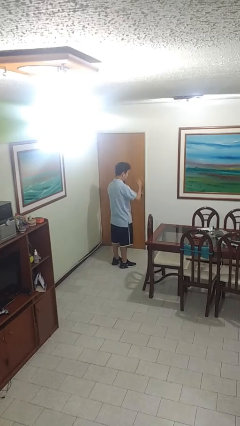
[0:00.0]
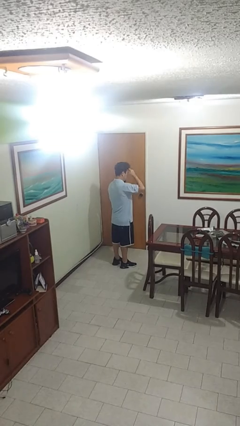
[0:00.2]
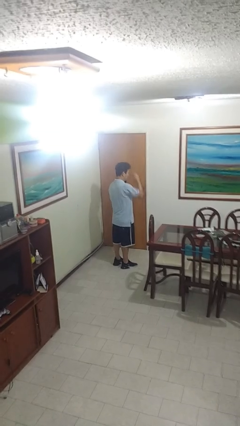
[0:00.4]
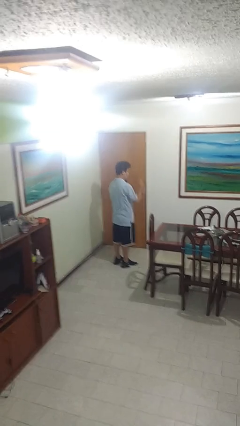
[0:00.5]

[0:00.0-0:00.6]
person salutes

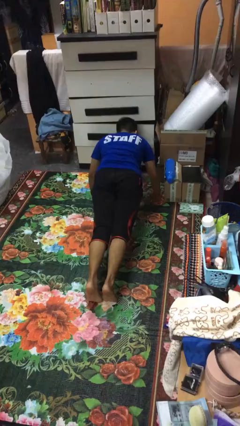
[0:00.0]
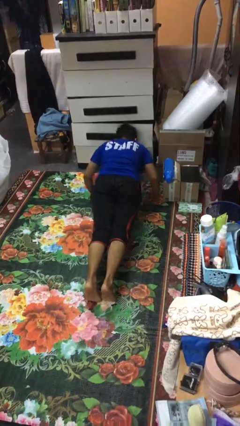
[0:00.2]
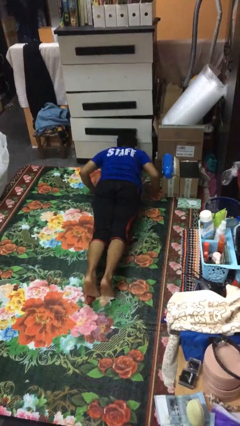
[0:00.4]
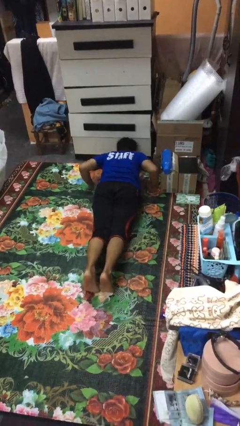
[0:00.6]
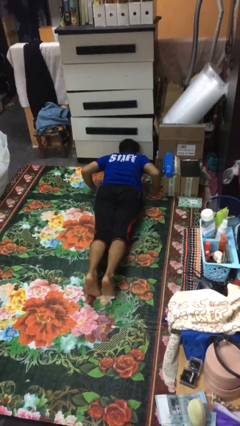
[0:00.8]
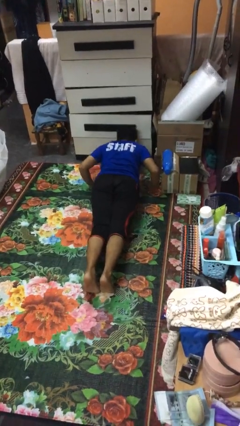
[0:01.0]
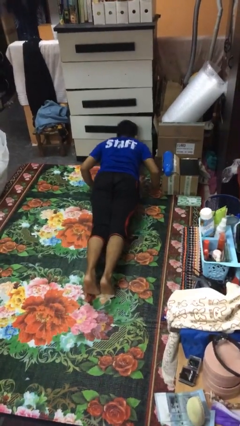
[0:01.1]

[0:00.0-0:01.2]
person exercises with pushup

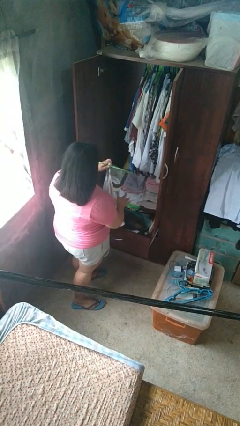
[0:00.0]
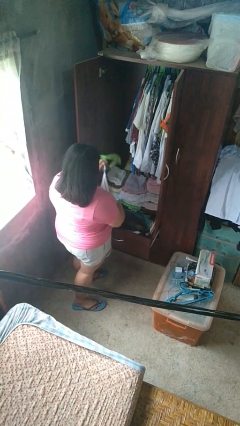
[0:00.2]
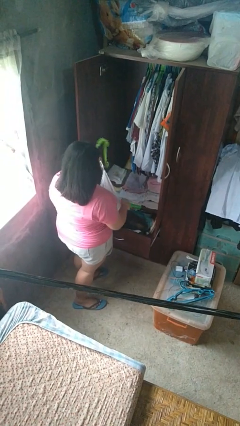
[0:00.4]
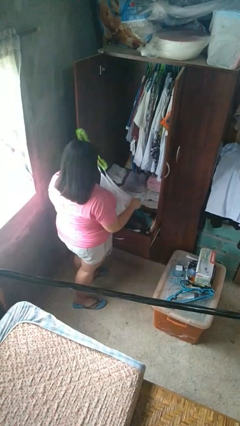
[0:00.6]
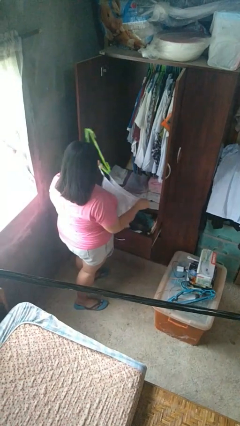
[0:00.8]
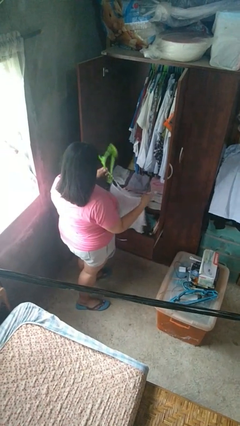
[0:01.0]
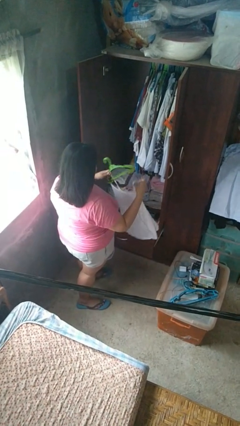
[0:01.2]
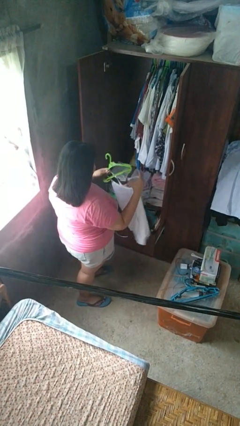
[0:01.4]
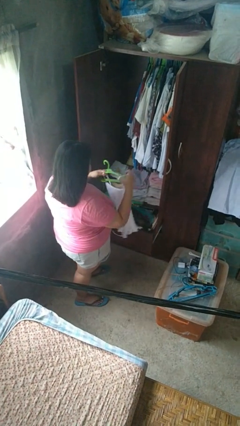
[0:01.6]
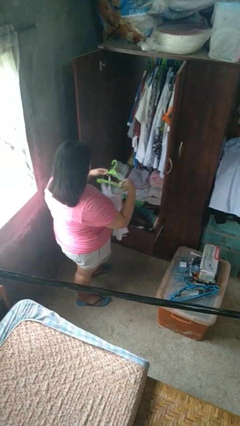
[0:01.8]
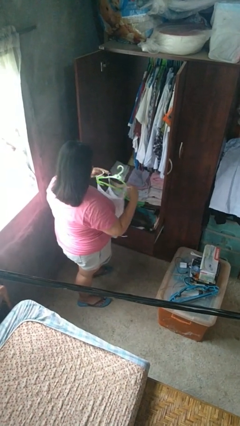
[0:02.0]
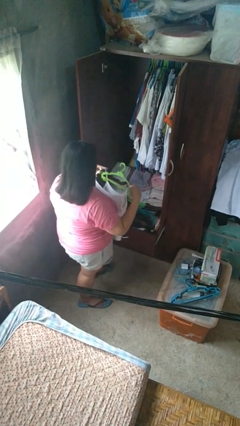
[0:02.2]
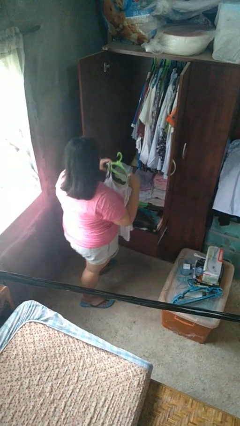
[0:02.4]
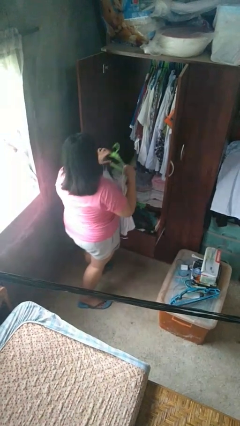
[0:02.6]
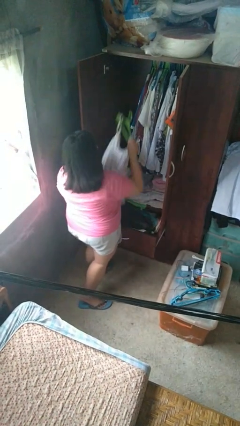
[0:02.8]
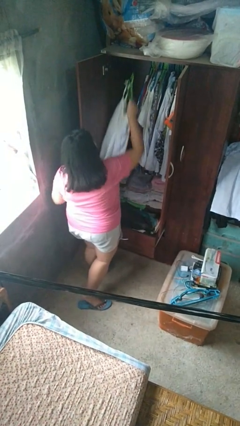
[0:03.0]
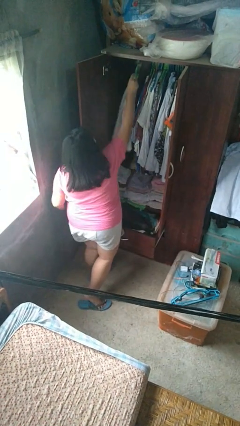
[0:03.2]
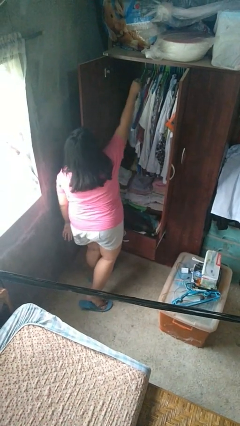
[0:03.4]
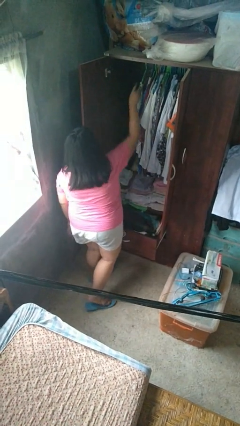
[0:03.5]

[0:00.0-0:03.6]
person puts clothes into closet

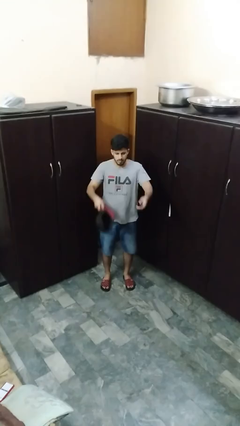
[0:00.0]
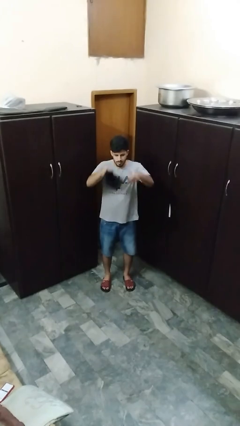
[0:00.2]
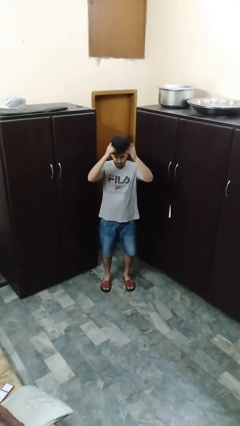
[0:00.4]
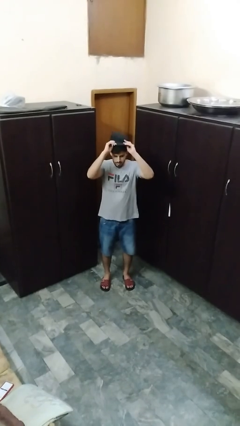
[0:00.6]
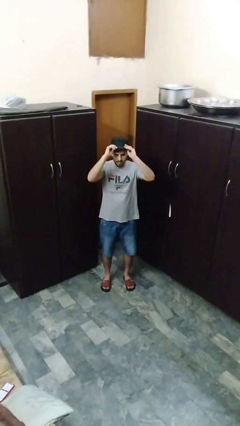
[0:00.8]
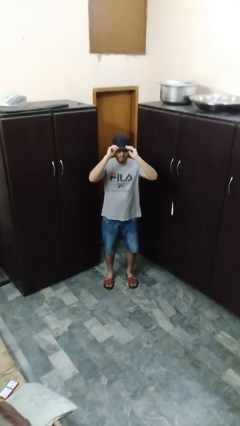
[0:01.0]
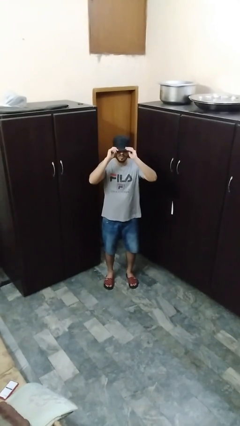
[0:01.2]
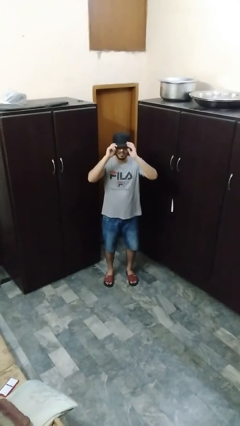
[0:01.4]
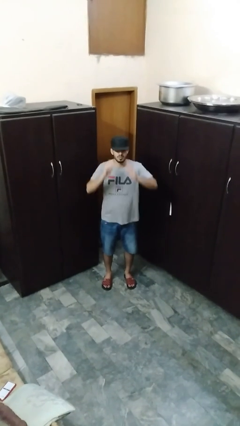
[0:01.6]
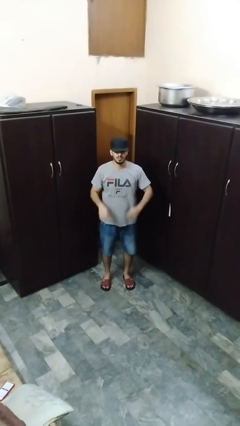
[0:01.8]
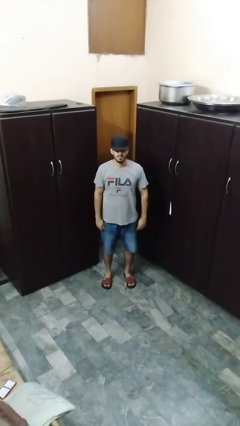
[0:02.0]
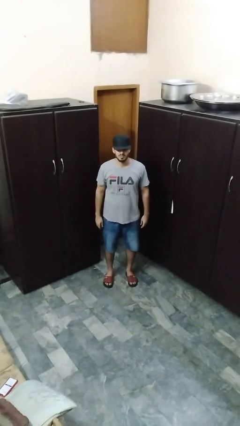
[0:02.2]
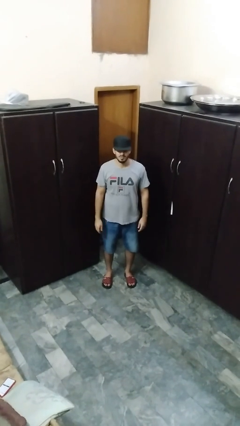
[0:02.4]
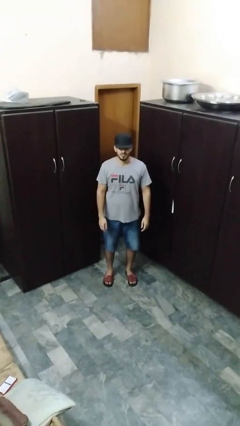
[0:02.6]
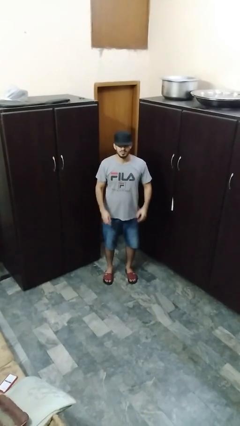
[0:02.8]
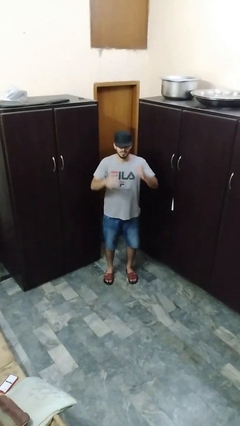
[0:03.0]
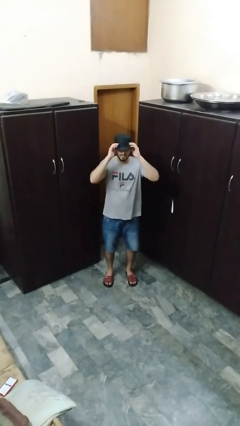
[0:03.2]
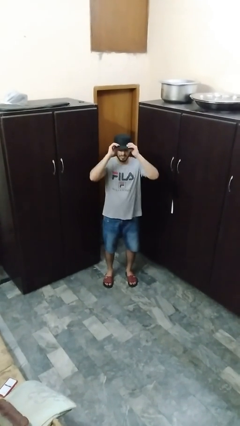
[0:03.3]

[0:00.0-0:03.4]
person puts on hat

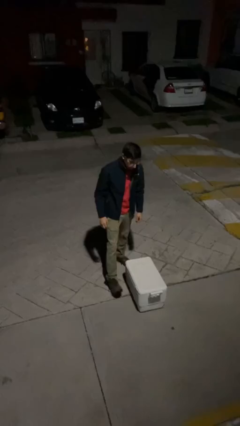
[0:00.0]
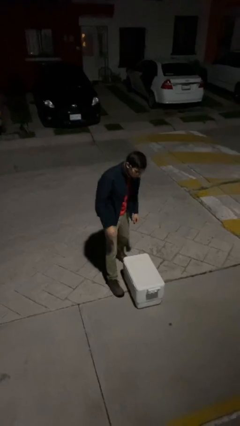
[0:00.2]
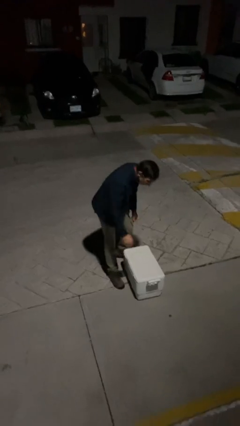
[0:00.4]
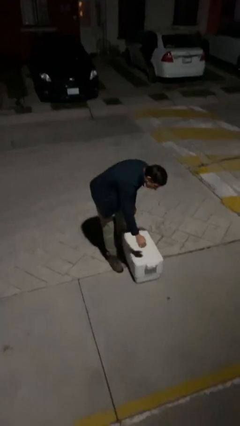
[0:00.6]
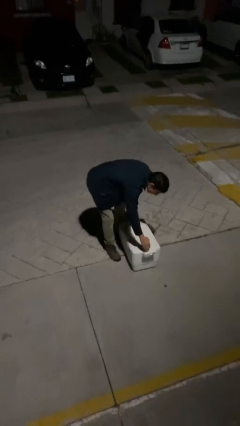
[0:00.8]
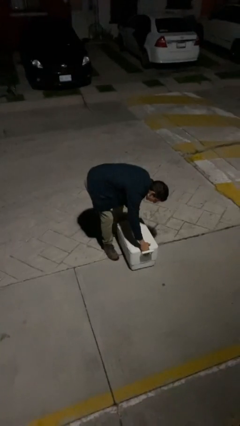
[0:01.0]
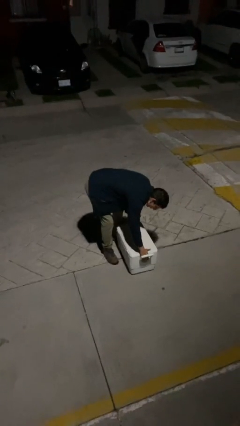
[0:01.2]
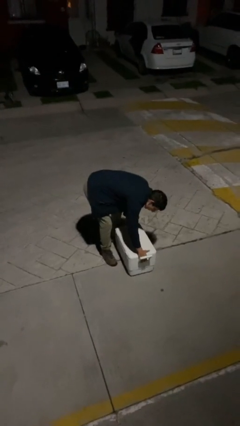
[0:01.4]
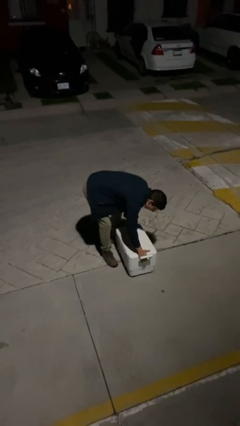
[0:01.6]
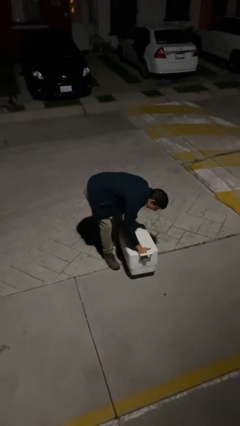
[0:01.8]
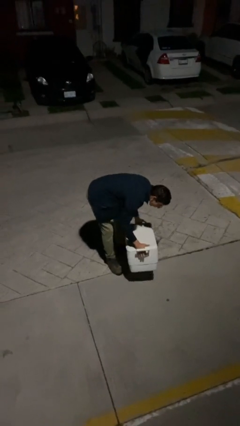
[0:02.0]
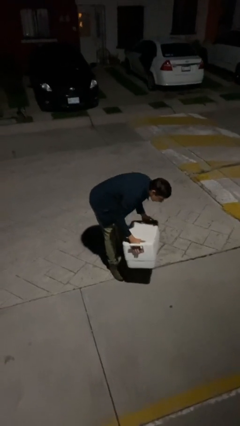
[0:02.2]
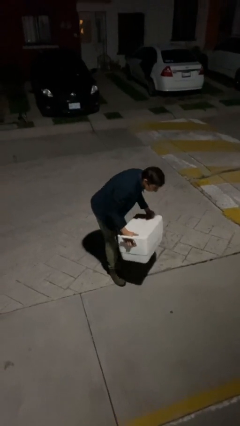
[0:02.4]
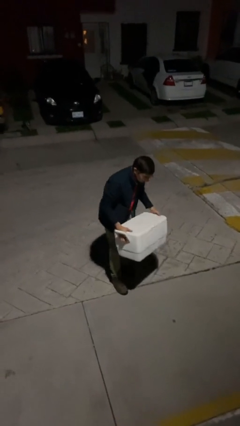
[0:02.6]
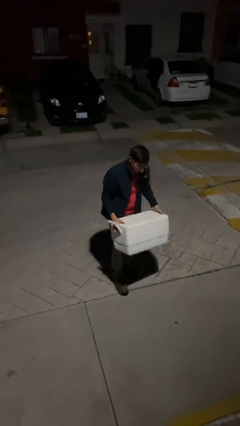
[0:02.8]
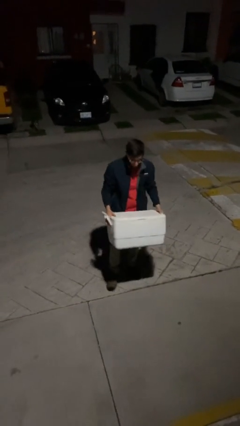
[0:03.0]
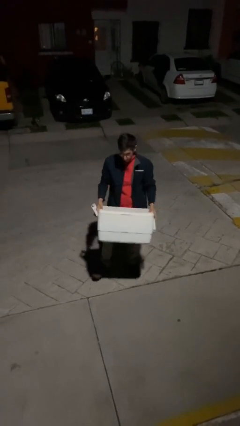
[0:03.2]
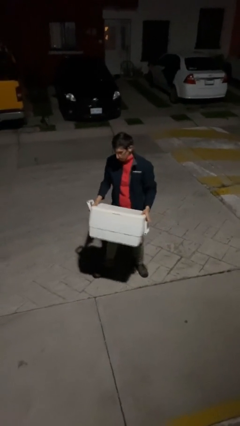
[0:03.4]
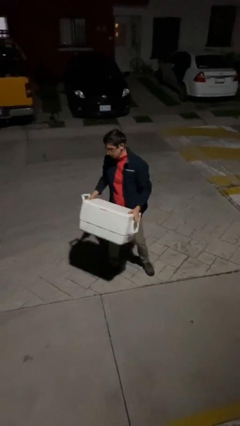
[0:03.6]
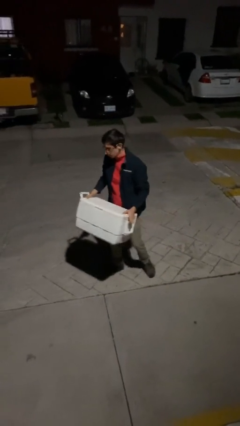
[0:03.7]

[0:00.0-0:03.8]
person picks up object from floor

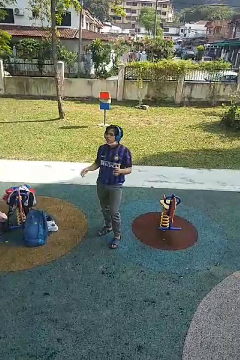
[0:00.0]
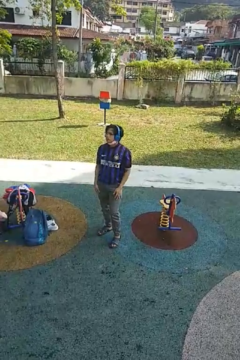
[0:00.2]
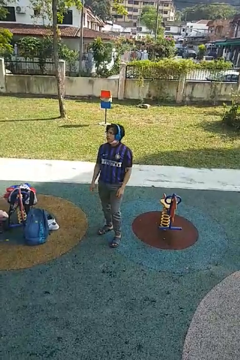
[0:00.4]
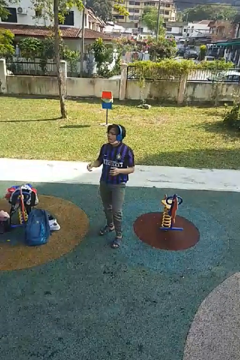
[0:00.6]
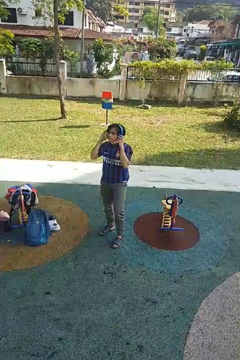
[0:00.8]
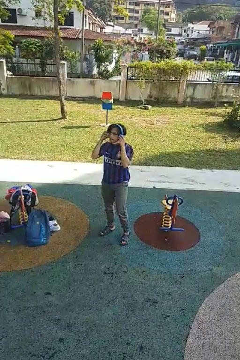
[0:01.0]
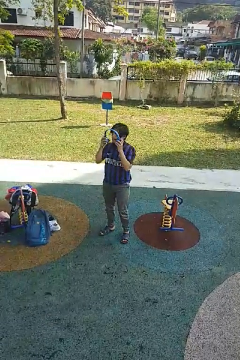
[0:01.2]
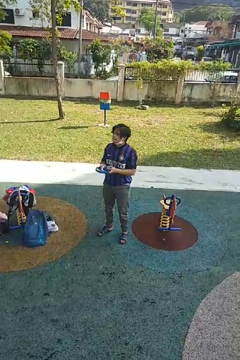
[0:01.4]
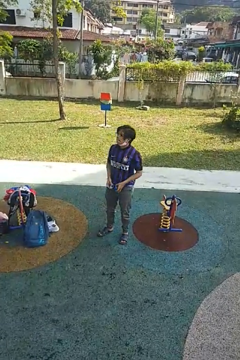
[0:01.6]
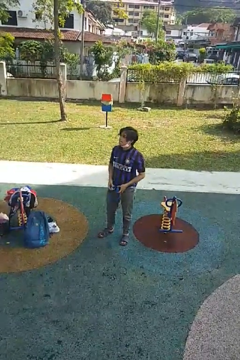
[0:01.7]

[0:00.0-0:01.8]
person takes off headphones

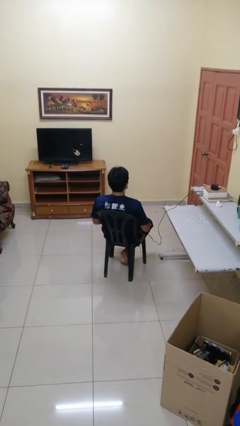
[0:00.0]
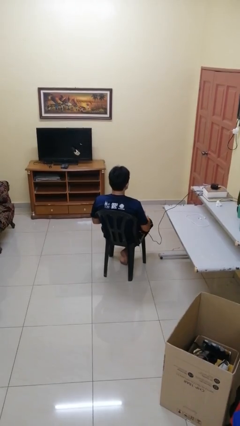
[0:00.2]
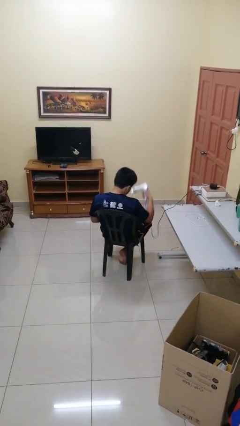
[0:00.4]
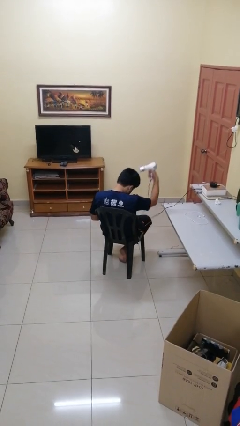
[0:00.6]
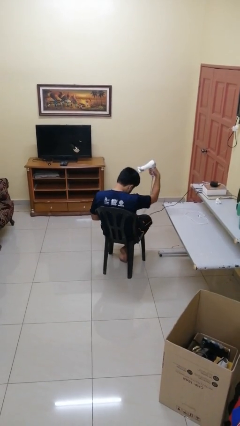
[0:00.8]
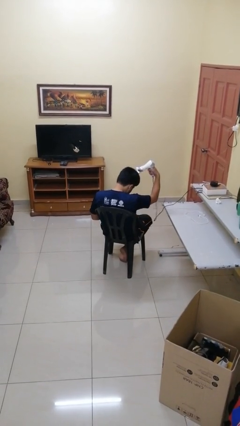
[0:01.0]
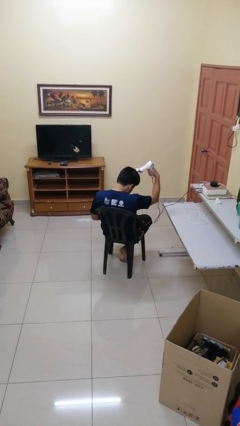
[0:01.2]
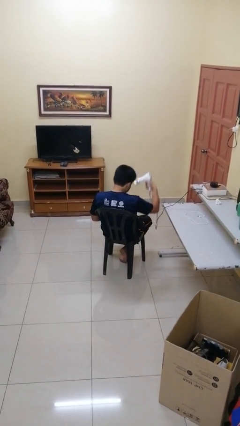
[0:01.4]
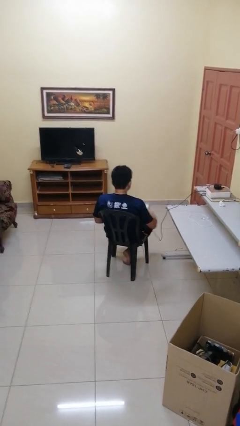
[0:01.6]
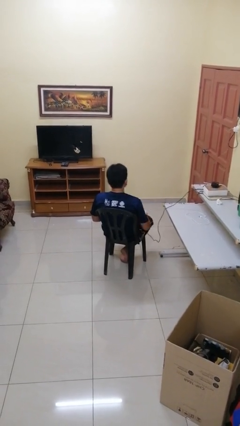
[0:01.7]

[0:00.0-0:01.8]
person dries hair with hairdryer

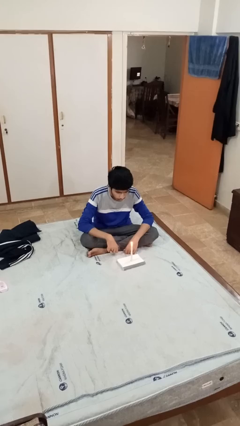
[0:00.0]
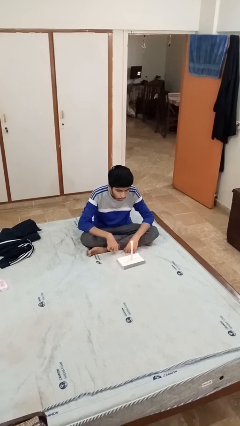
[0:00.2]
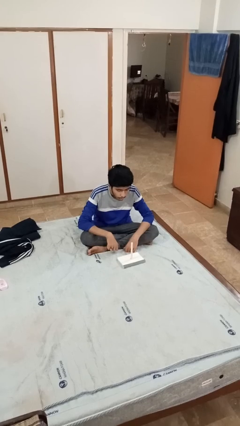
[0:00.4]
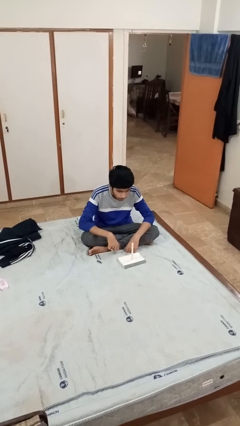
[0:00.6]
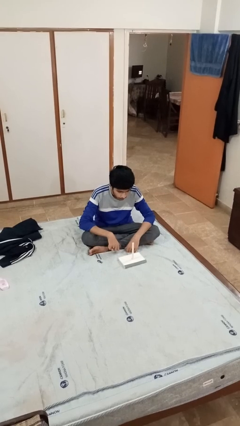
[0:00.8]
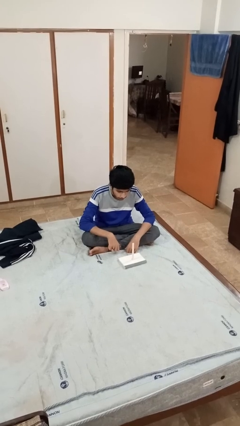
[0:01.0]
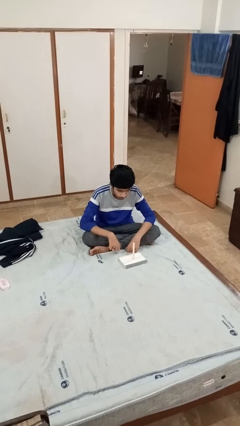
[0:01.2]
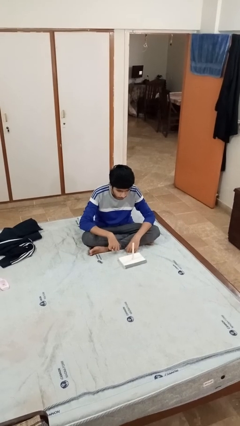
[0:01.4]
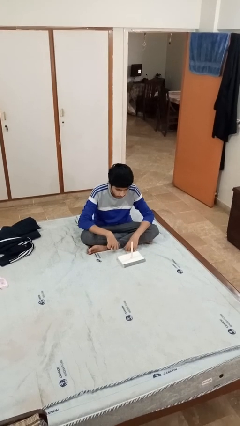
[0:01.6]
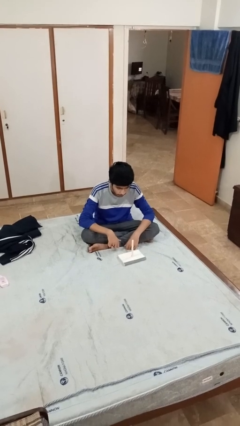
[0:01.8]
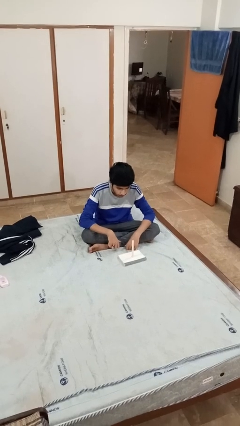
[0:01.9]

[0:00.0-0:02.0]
person extinguishes candle
